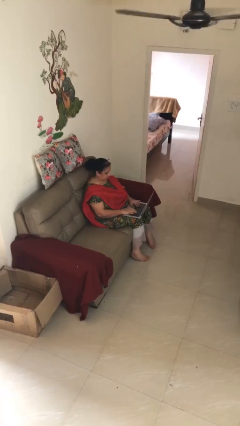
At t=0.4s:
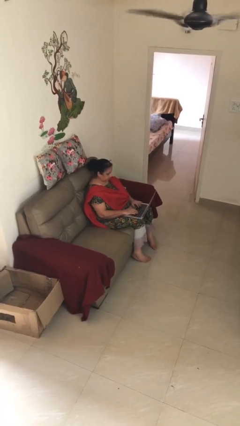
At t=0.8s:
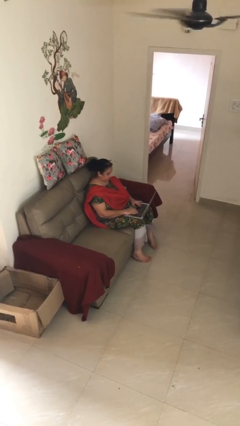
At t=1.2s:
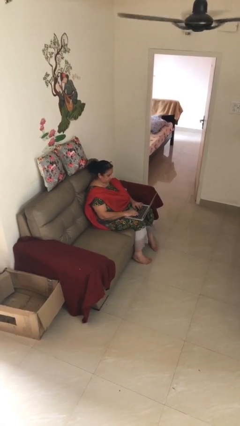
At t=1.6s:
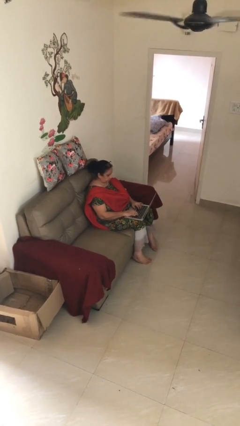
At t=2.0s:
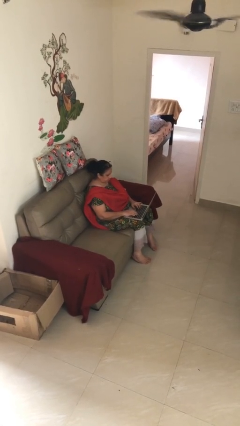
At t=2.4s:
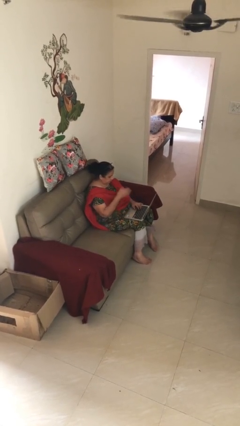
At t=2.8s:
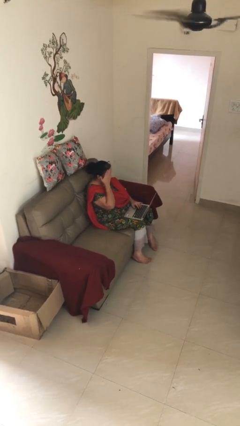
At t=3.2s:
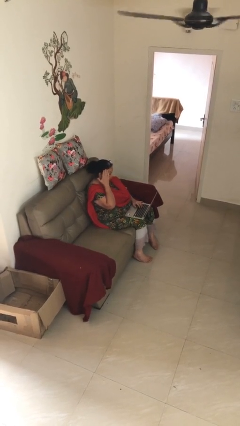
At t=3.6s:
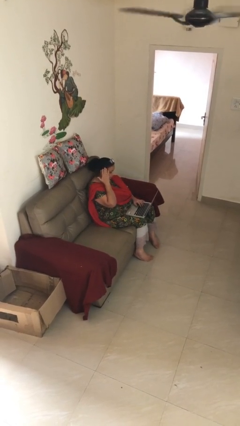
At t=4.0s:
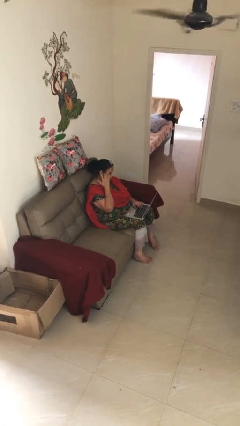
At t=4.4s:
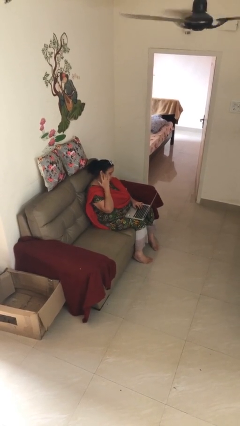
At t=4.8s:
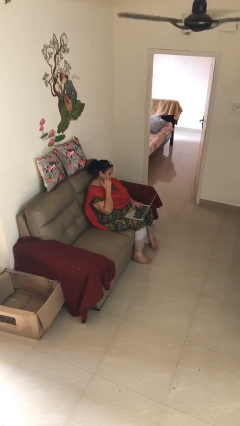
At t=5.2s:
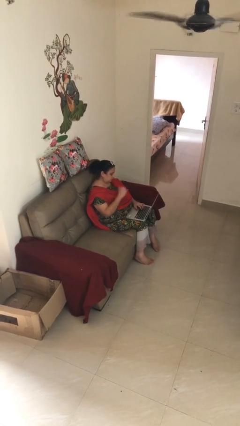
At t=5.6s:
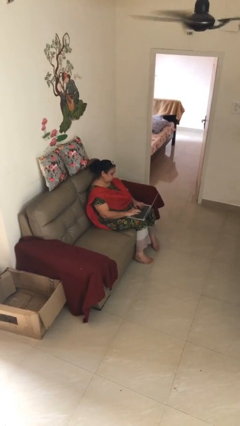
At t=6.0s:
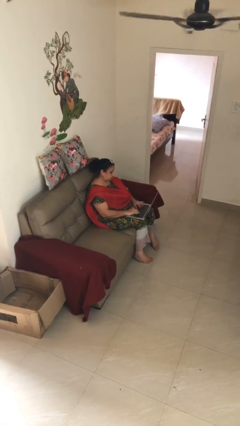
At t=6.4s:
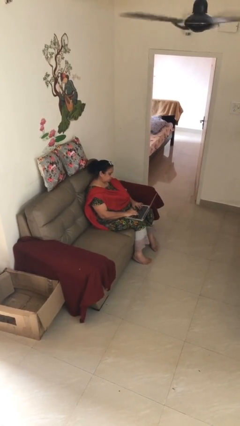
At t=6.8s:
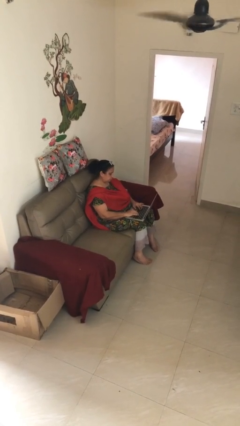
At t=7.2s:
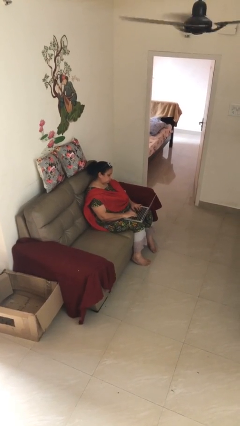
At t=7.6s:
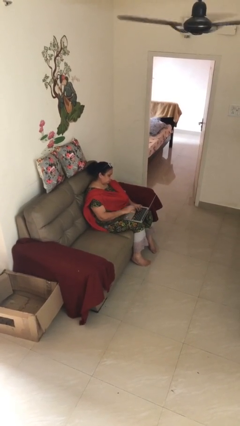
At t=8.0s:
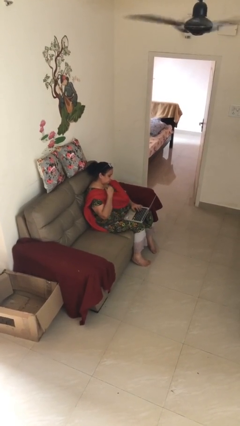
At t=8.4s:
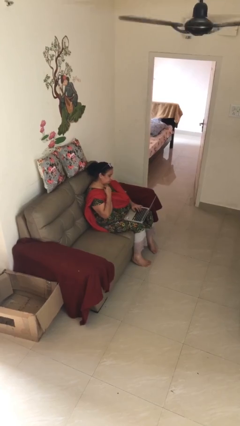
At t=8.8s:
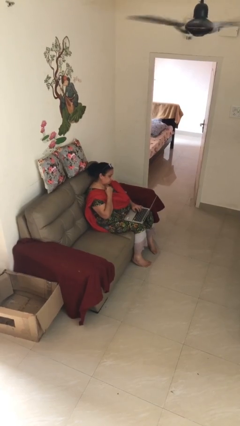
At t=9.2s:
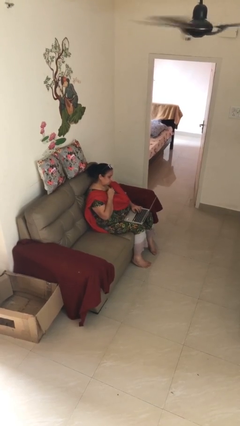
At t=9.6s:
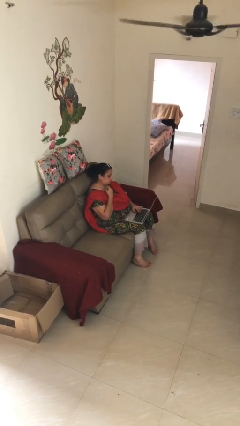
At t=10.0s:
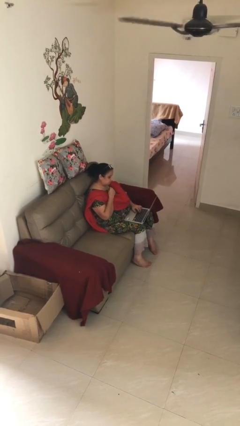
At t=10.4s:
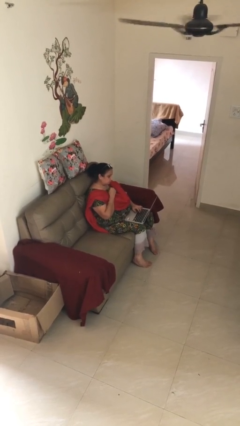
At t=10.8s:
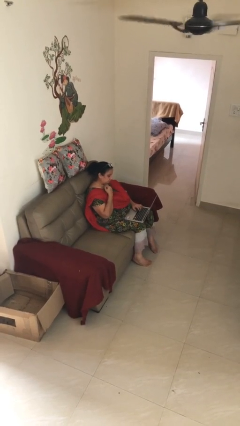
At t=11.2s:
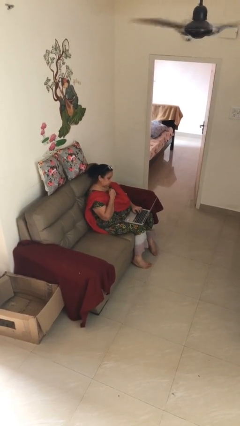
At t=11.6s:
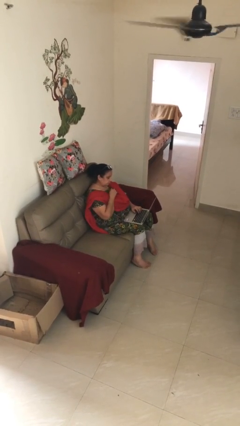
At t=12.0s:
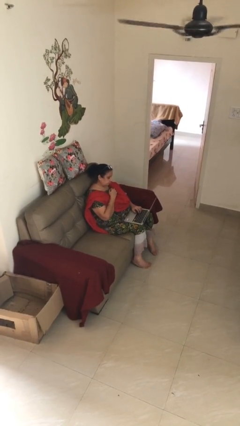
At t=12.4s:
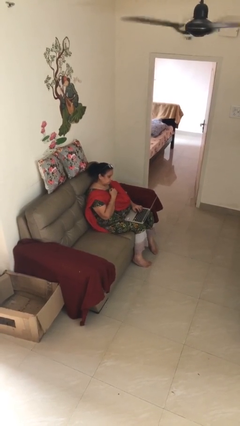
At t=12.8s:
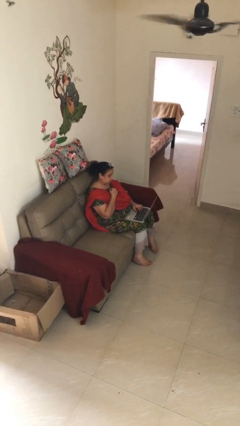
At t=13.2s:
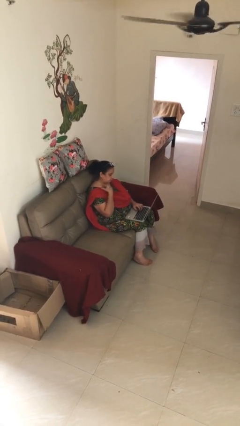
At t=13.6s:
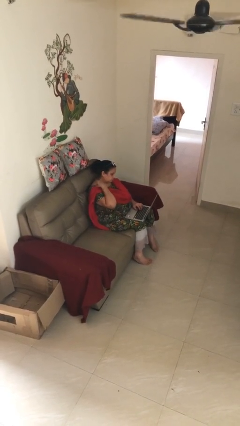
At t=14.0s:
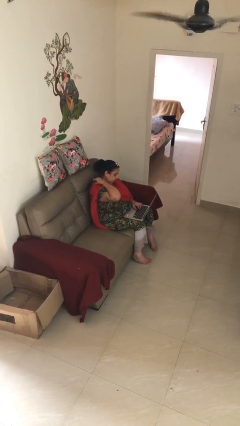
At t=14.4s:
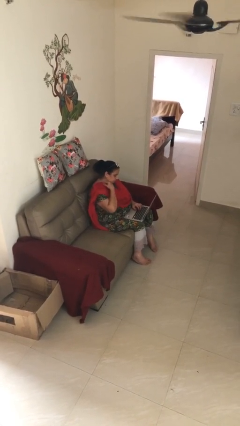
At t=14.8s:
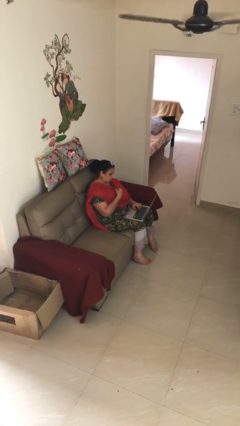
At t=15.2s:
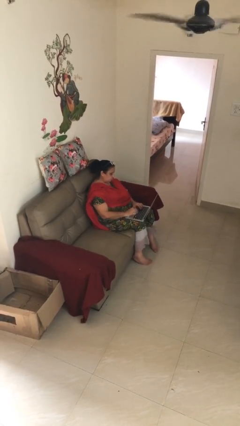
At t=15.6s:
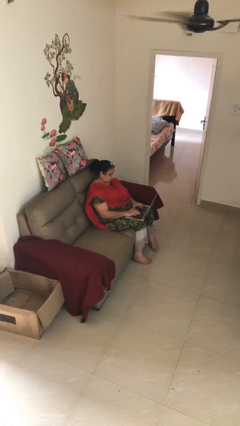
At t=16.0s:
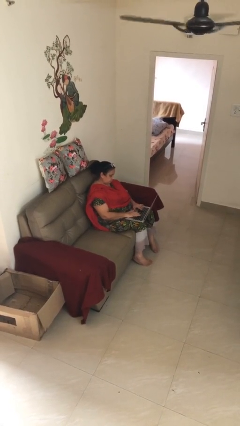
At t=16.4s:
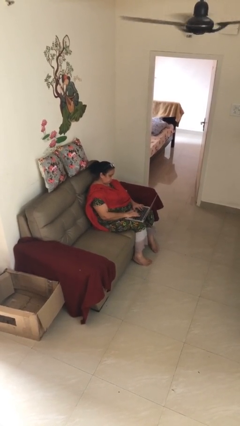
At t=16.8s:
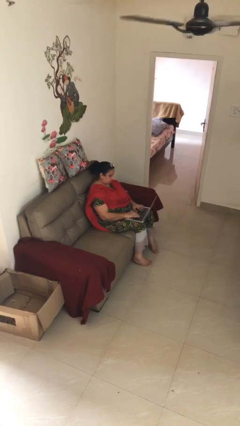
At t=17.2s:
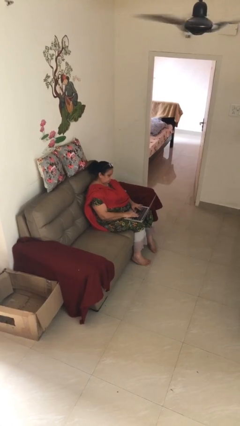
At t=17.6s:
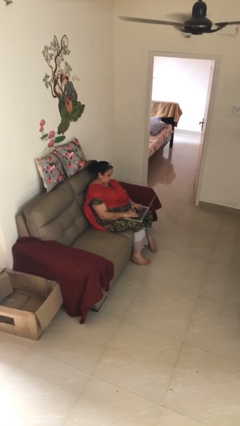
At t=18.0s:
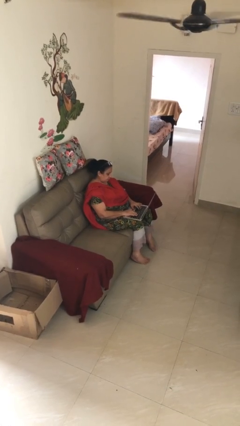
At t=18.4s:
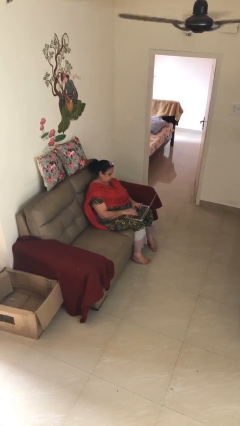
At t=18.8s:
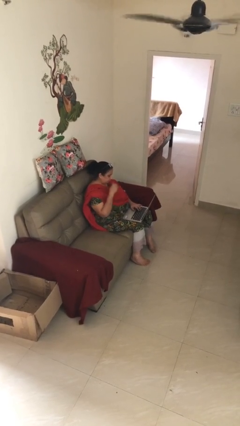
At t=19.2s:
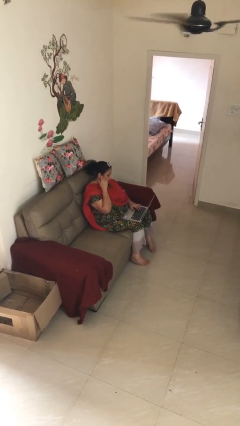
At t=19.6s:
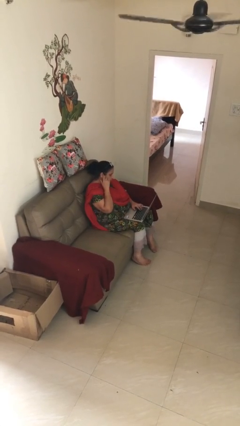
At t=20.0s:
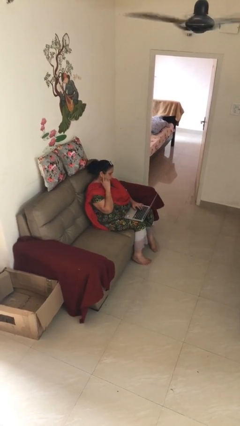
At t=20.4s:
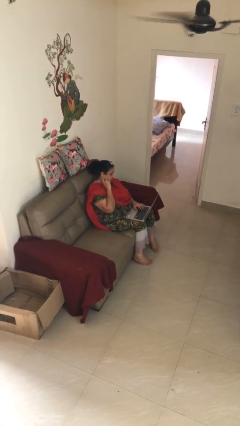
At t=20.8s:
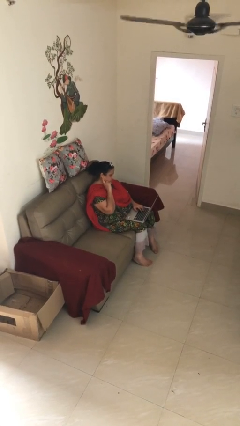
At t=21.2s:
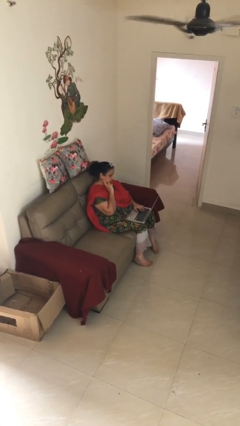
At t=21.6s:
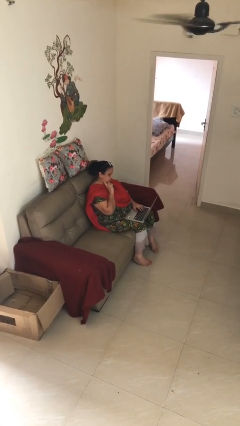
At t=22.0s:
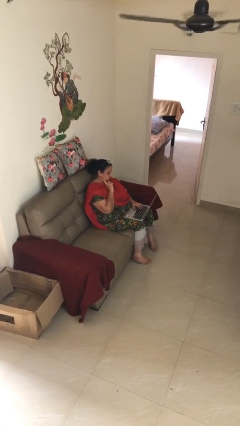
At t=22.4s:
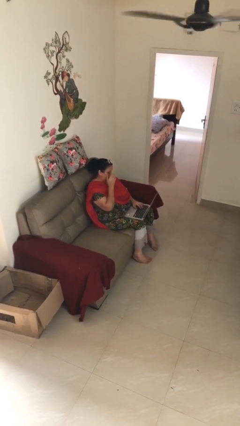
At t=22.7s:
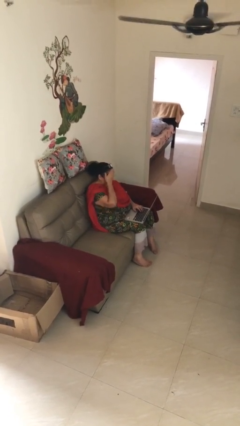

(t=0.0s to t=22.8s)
person interacts with laptop

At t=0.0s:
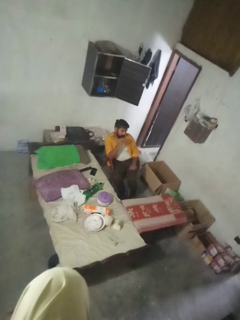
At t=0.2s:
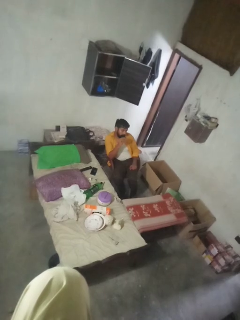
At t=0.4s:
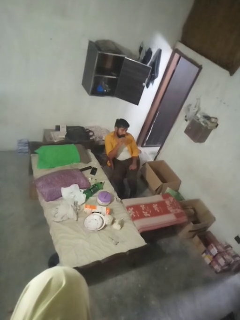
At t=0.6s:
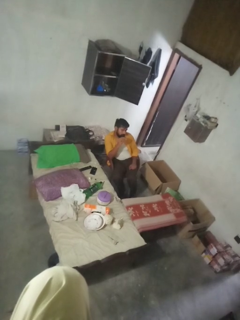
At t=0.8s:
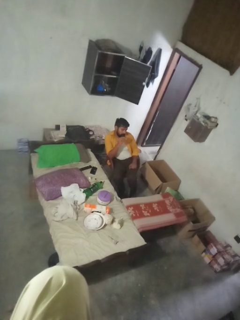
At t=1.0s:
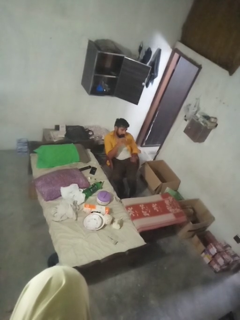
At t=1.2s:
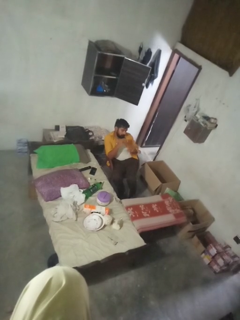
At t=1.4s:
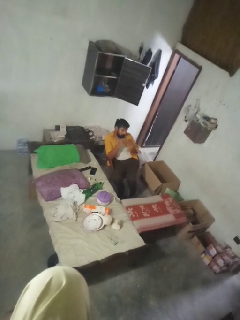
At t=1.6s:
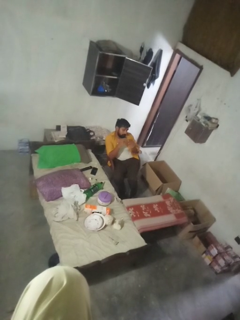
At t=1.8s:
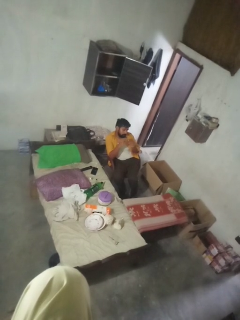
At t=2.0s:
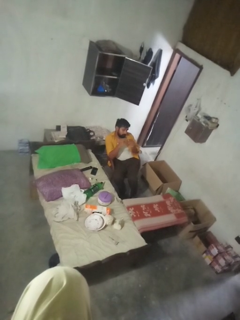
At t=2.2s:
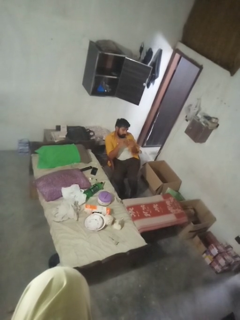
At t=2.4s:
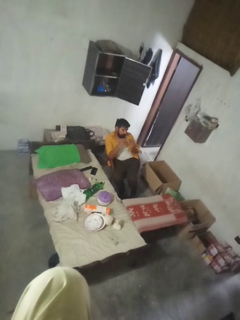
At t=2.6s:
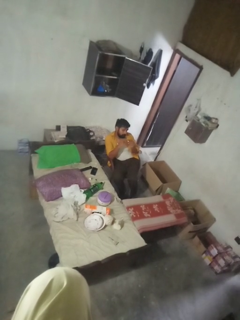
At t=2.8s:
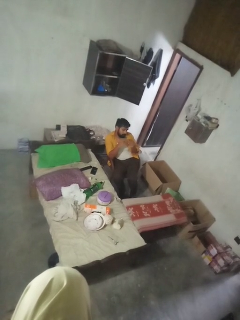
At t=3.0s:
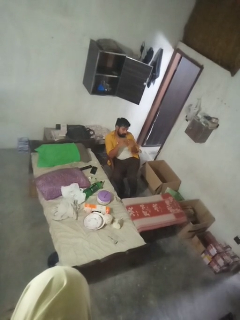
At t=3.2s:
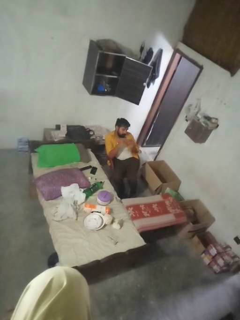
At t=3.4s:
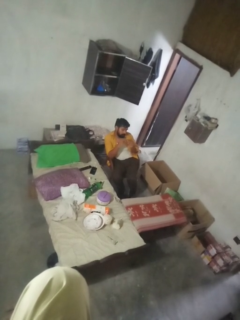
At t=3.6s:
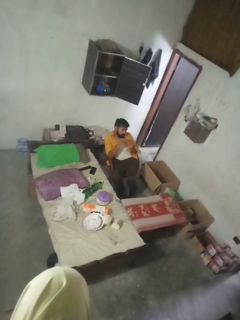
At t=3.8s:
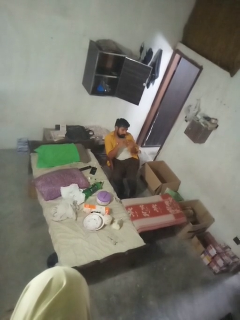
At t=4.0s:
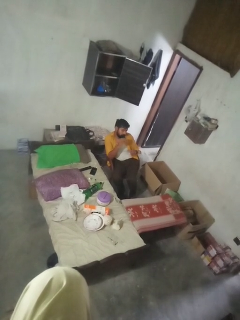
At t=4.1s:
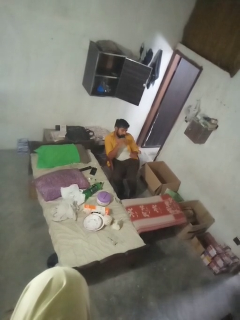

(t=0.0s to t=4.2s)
person clips fingernails

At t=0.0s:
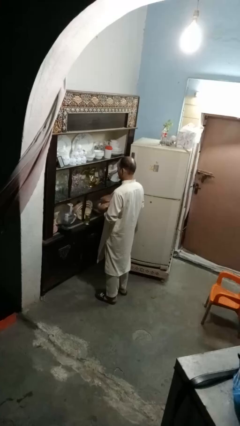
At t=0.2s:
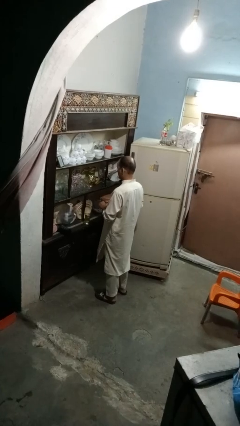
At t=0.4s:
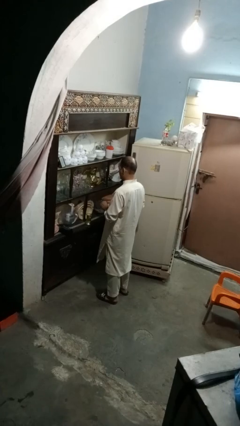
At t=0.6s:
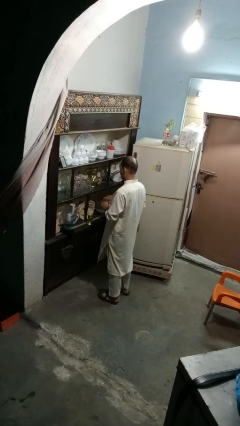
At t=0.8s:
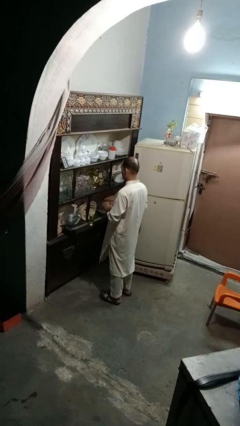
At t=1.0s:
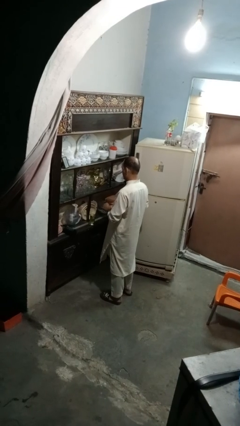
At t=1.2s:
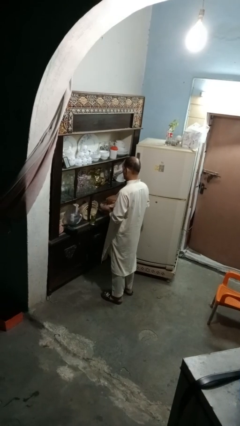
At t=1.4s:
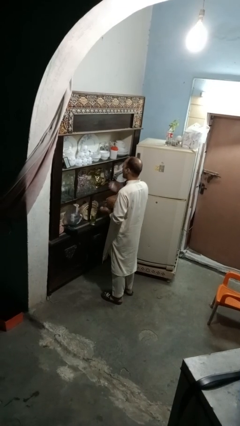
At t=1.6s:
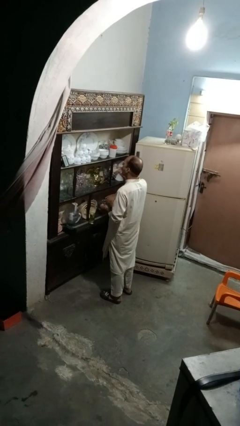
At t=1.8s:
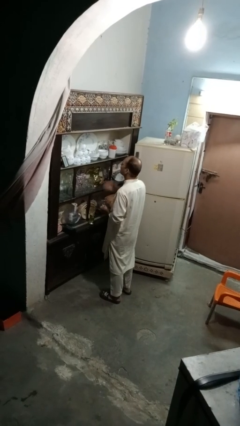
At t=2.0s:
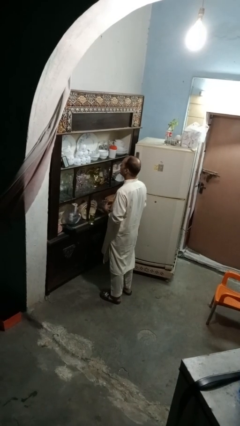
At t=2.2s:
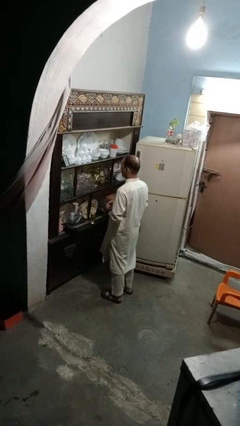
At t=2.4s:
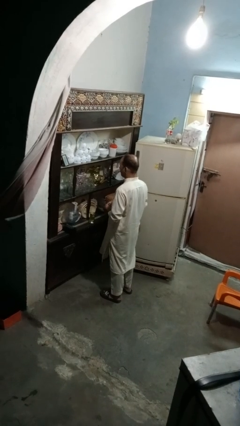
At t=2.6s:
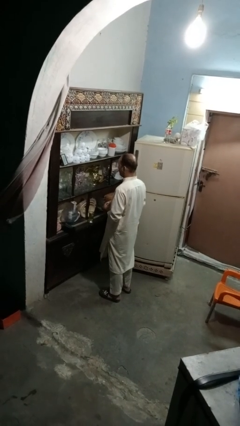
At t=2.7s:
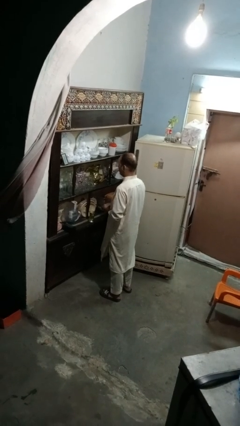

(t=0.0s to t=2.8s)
person takes medicine pills

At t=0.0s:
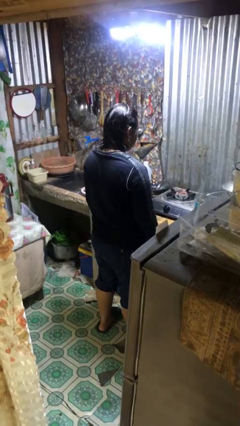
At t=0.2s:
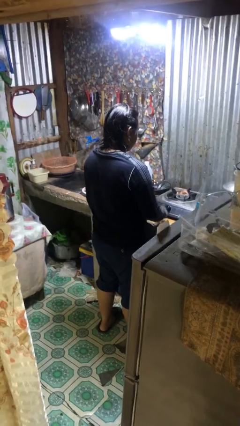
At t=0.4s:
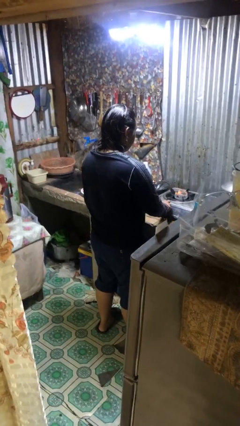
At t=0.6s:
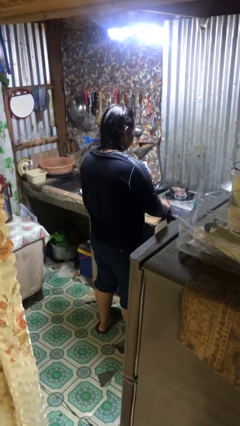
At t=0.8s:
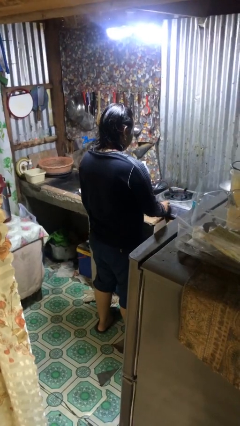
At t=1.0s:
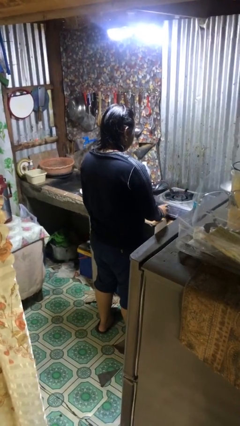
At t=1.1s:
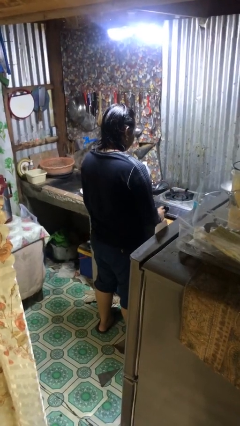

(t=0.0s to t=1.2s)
person turns off stovetop
